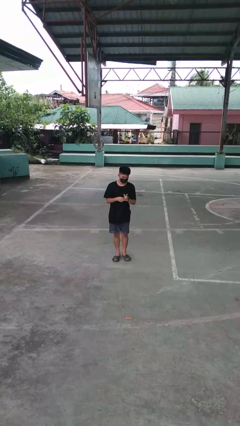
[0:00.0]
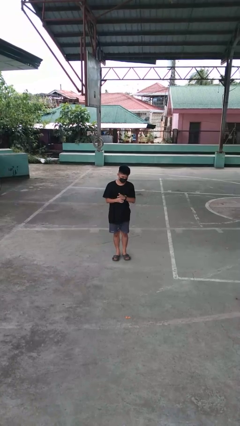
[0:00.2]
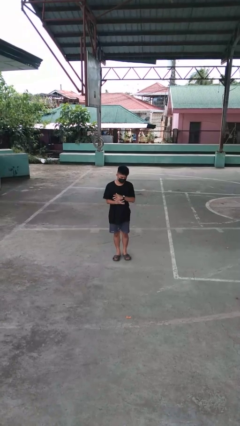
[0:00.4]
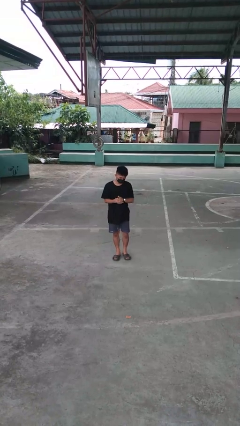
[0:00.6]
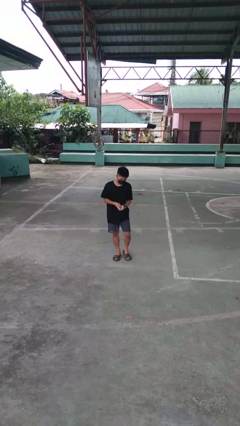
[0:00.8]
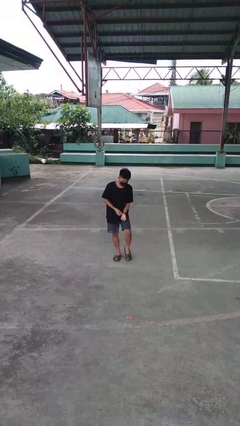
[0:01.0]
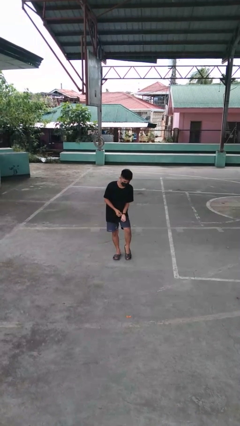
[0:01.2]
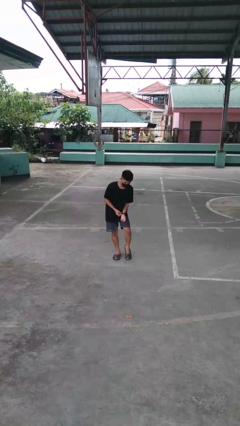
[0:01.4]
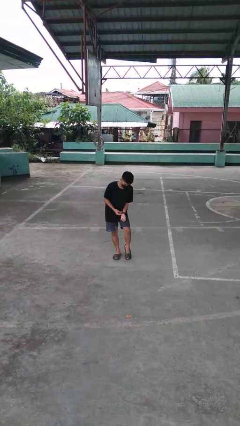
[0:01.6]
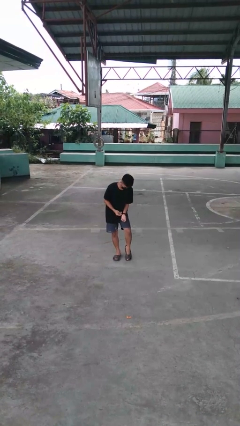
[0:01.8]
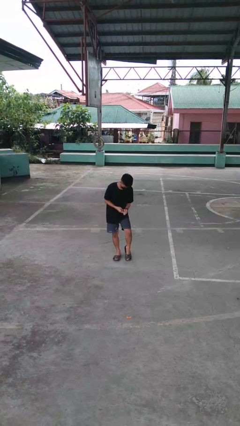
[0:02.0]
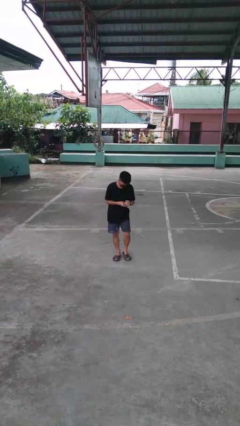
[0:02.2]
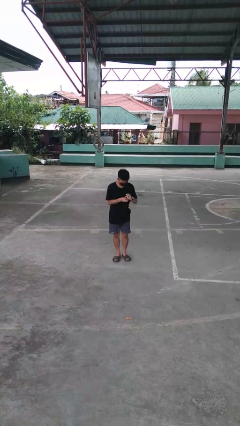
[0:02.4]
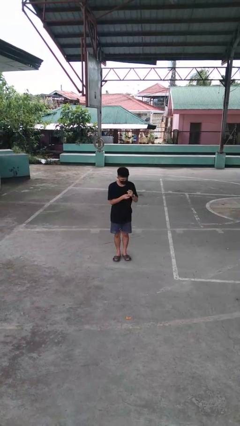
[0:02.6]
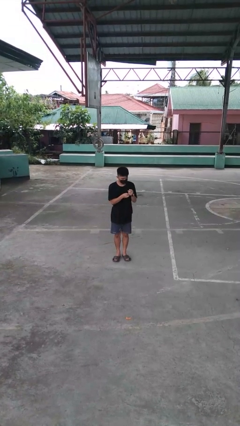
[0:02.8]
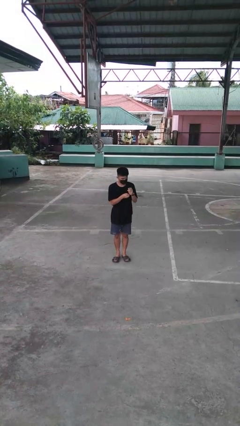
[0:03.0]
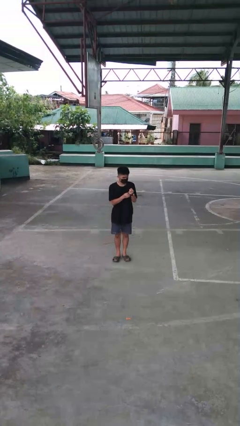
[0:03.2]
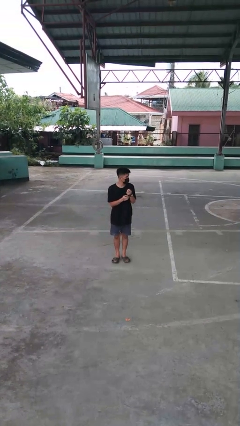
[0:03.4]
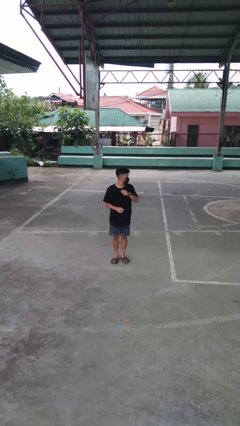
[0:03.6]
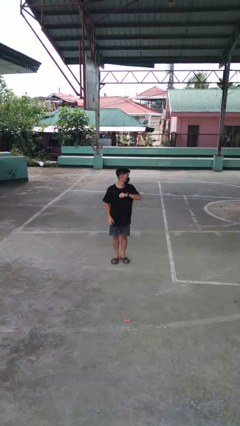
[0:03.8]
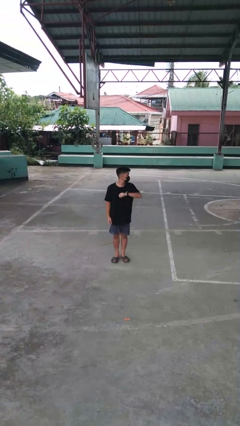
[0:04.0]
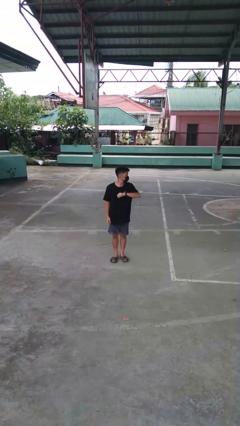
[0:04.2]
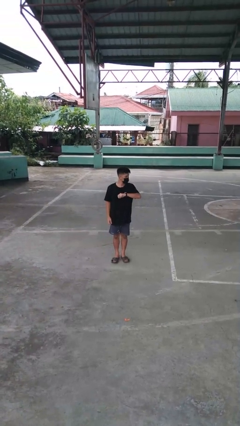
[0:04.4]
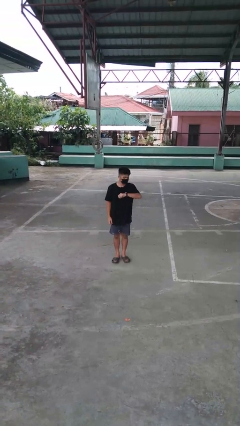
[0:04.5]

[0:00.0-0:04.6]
person puts on wristwatch

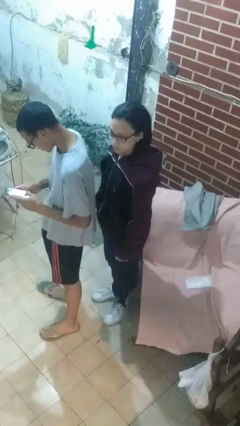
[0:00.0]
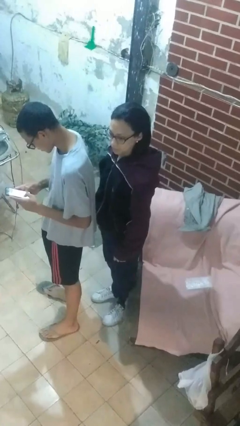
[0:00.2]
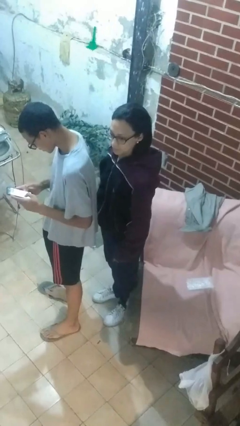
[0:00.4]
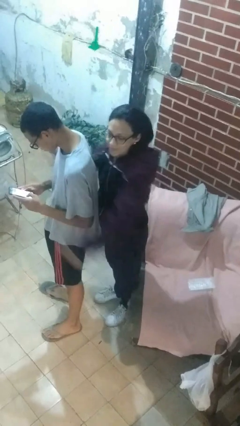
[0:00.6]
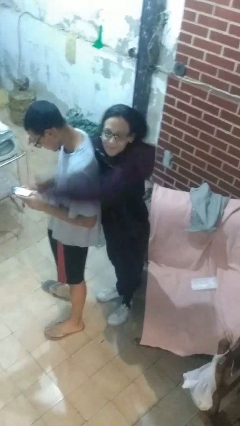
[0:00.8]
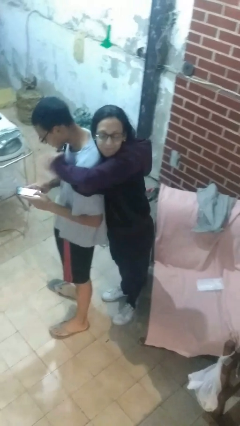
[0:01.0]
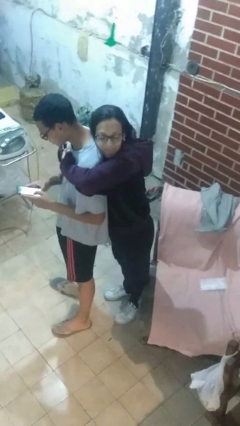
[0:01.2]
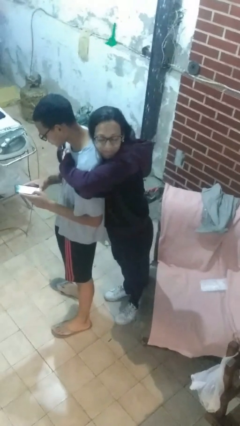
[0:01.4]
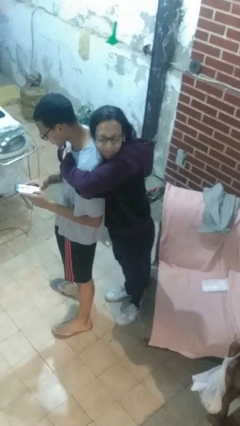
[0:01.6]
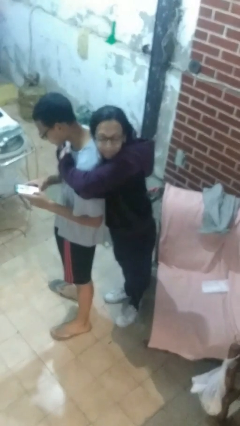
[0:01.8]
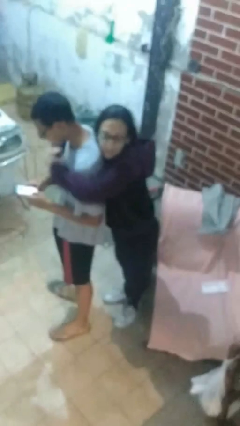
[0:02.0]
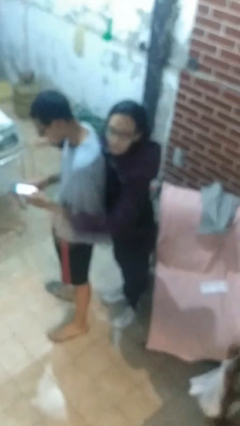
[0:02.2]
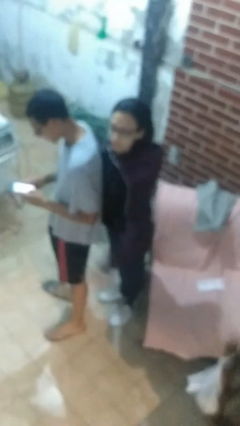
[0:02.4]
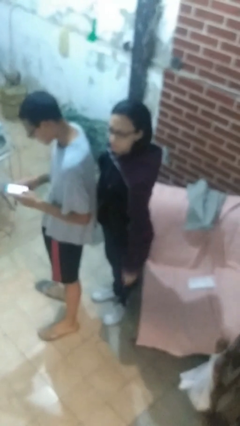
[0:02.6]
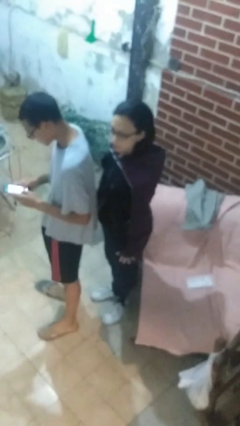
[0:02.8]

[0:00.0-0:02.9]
person hugs person from behind

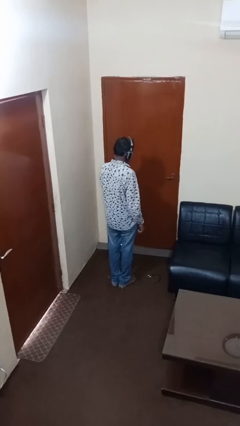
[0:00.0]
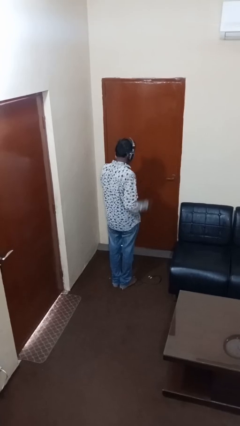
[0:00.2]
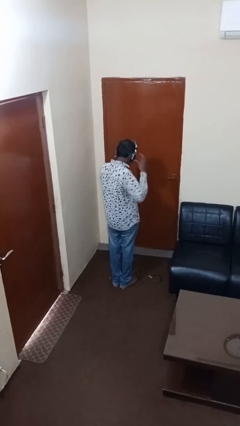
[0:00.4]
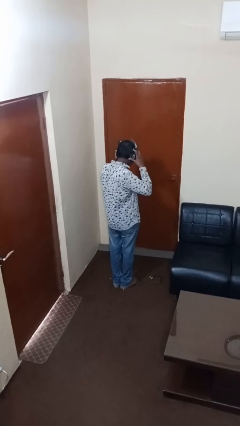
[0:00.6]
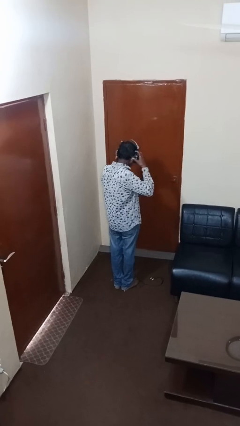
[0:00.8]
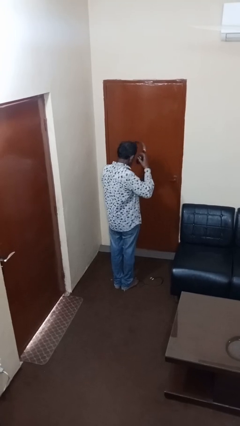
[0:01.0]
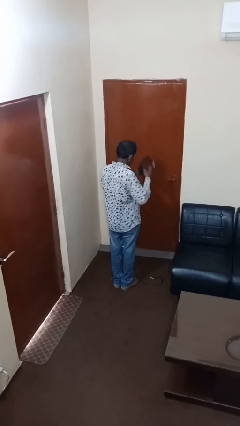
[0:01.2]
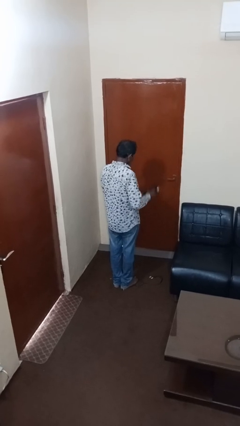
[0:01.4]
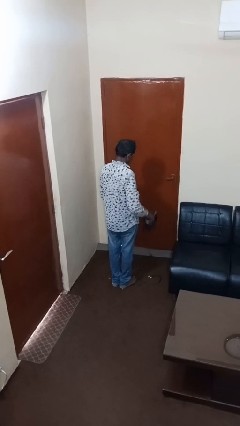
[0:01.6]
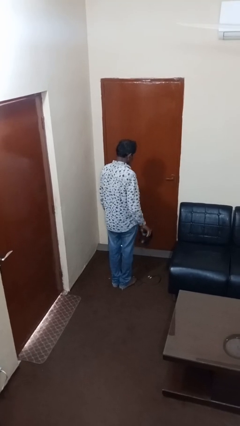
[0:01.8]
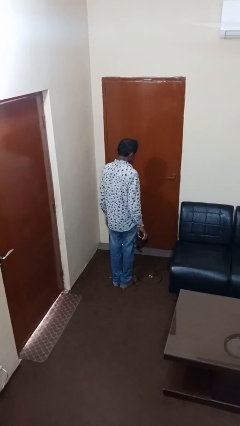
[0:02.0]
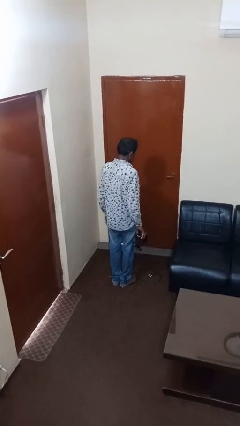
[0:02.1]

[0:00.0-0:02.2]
person takes off headphones

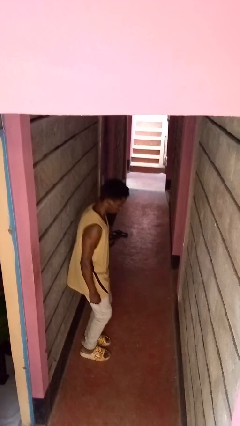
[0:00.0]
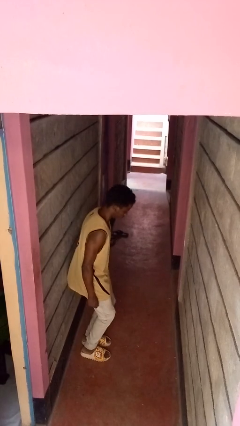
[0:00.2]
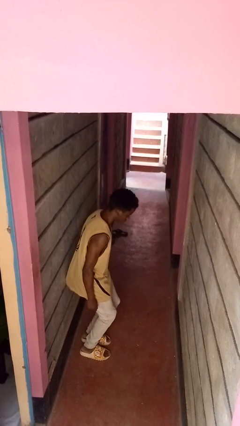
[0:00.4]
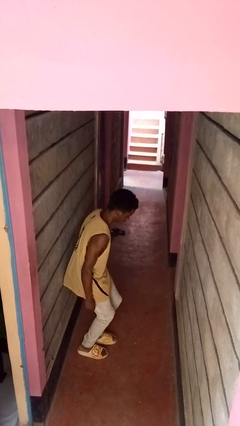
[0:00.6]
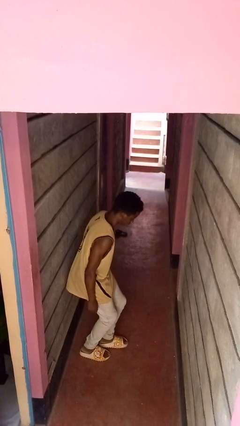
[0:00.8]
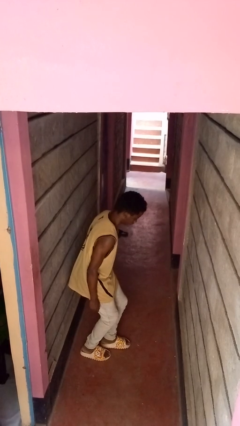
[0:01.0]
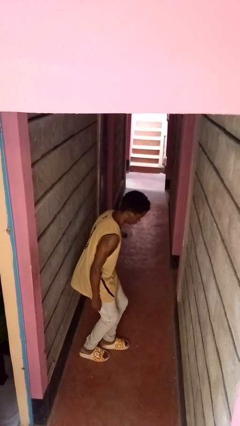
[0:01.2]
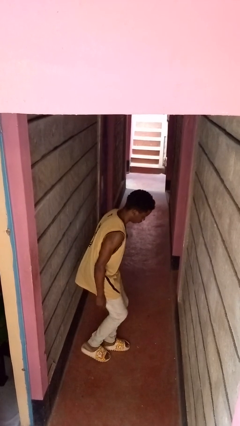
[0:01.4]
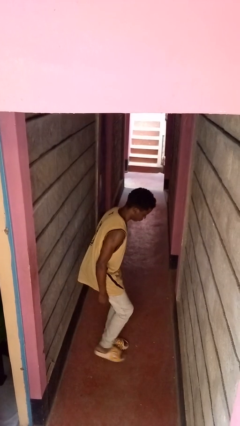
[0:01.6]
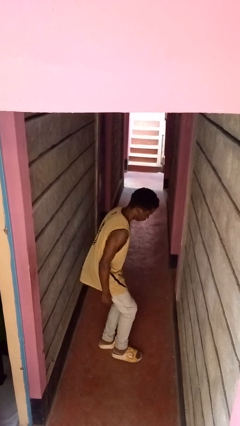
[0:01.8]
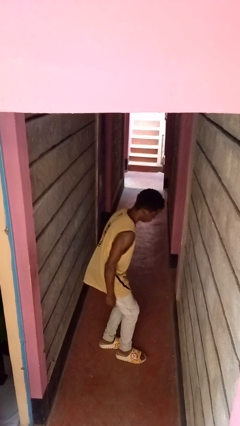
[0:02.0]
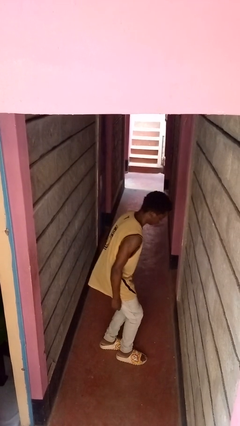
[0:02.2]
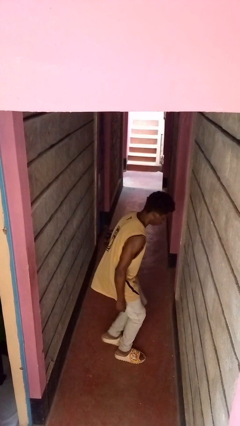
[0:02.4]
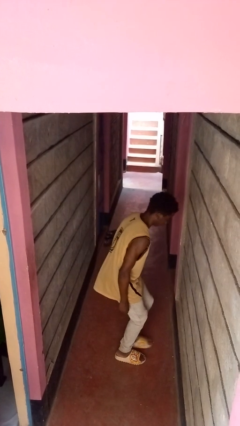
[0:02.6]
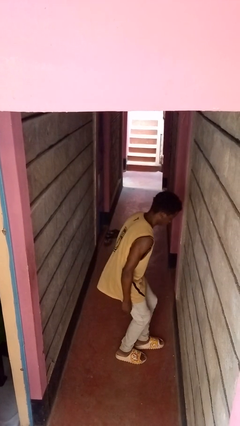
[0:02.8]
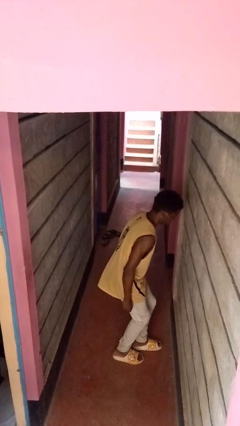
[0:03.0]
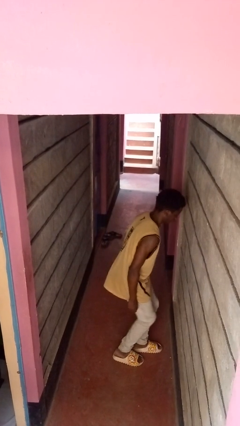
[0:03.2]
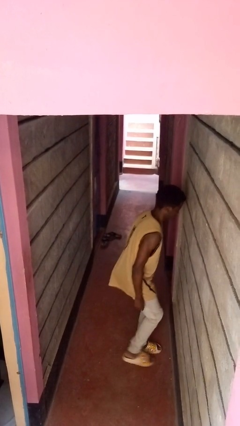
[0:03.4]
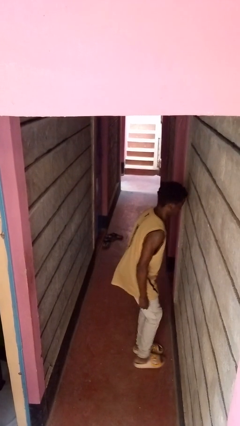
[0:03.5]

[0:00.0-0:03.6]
person walks tiptoe

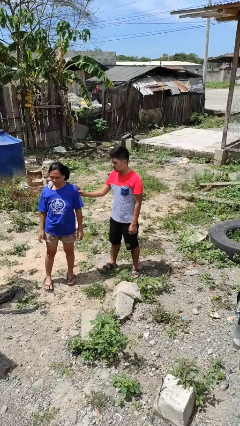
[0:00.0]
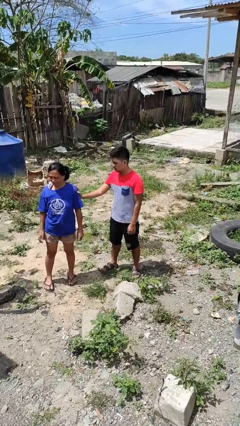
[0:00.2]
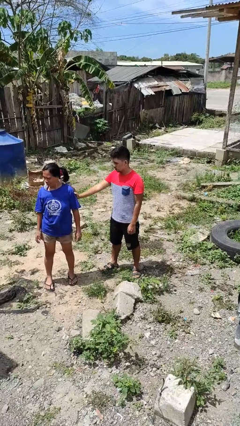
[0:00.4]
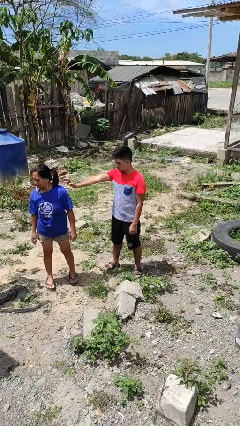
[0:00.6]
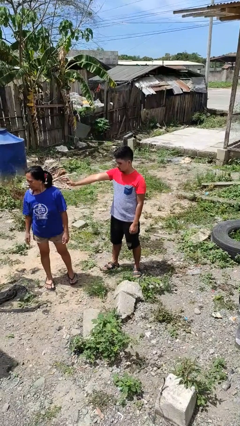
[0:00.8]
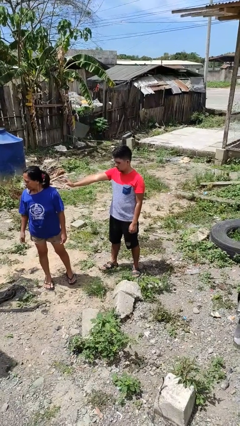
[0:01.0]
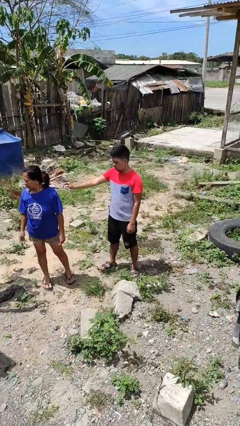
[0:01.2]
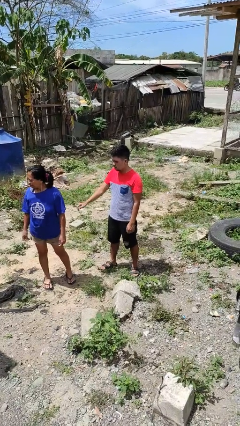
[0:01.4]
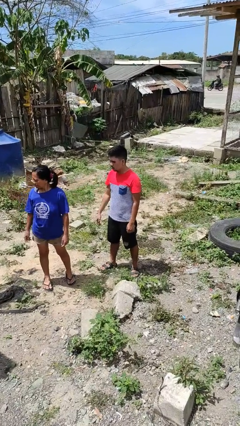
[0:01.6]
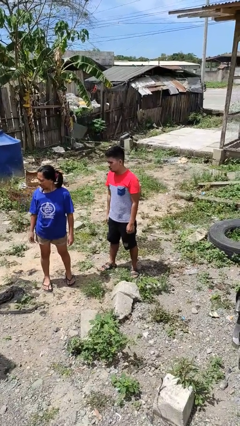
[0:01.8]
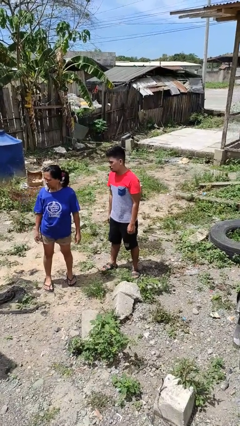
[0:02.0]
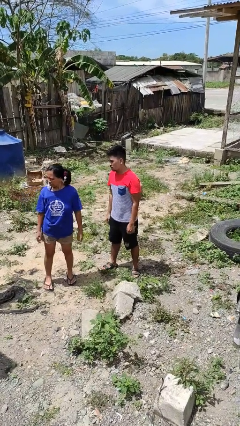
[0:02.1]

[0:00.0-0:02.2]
person shoves person

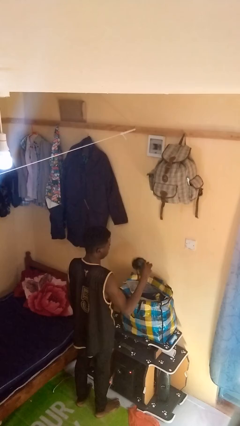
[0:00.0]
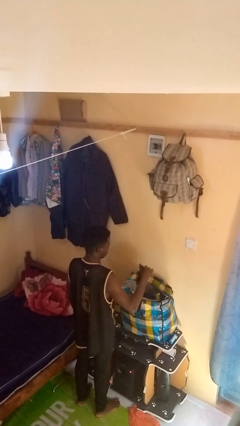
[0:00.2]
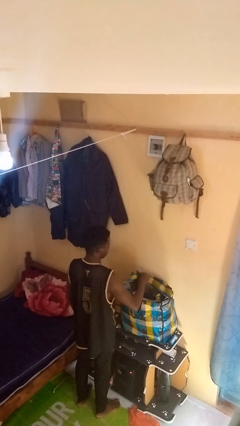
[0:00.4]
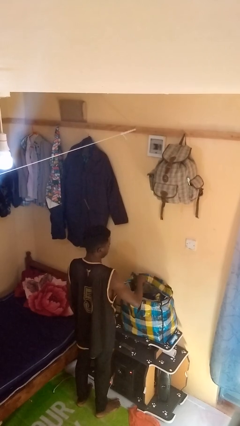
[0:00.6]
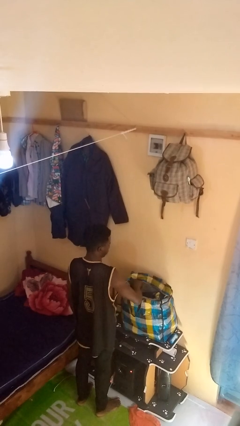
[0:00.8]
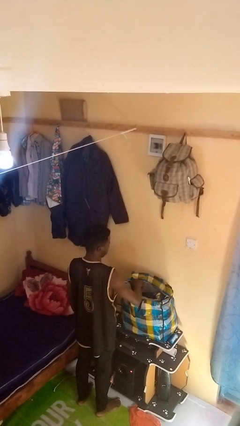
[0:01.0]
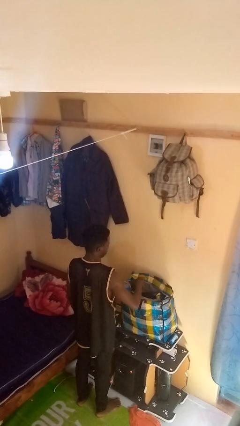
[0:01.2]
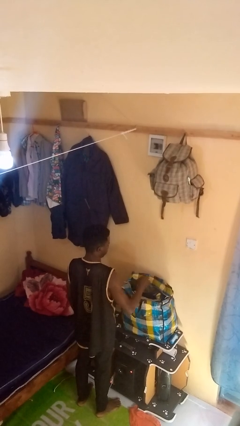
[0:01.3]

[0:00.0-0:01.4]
person puts object into bag

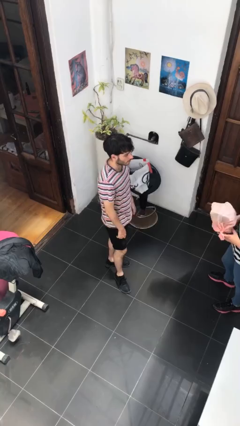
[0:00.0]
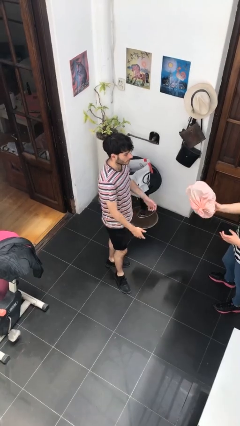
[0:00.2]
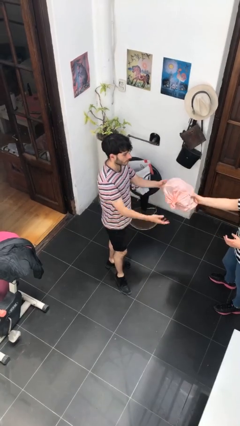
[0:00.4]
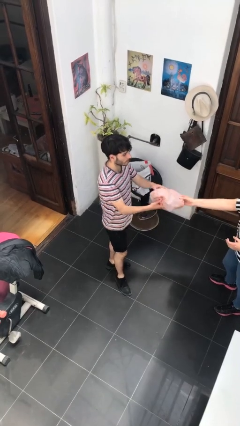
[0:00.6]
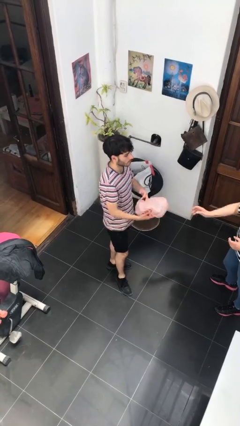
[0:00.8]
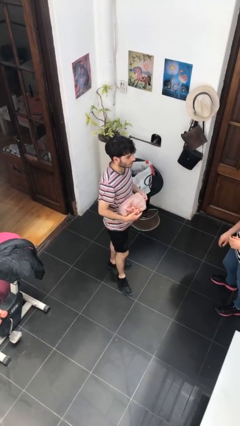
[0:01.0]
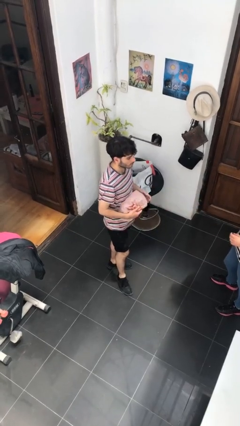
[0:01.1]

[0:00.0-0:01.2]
person transfers object to person
